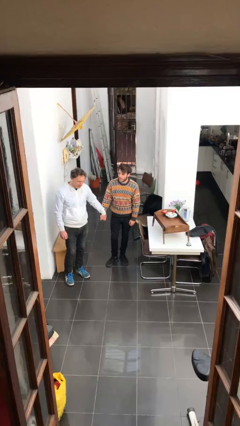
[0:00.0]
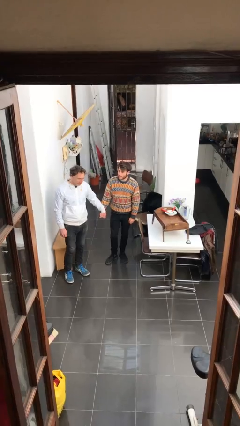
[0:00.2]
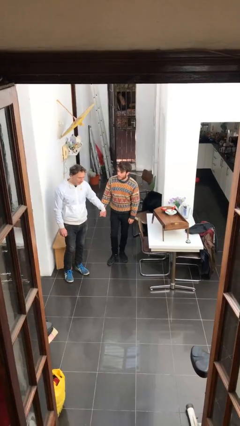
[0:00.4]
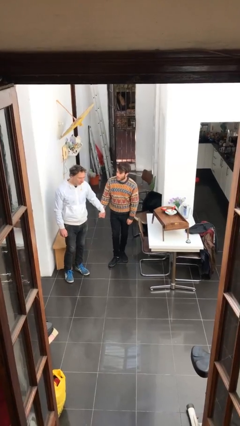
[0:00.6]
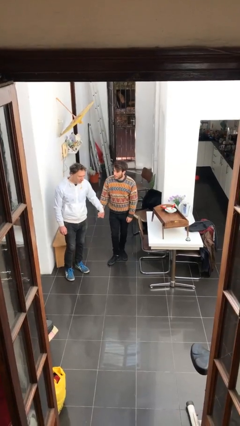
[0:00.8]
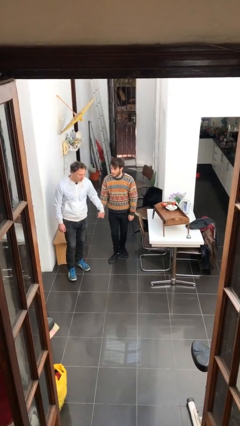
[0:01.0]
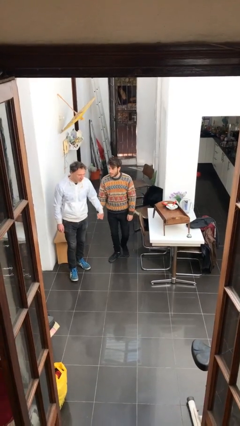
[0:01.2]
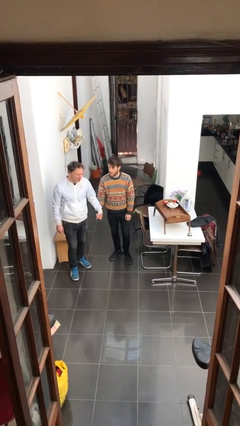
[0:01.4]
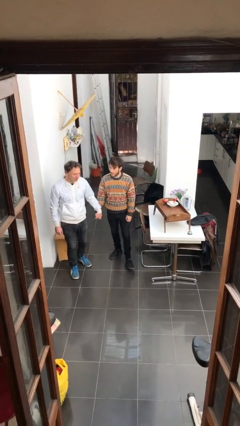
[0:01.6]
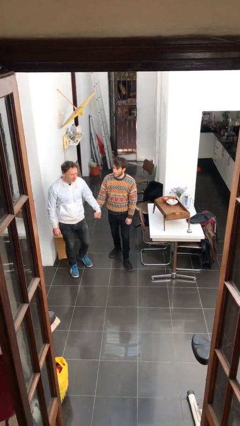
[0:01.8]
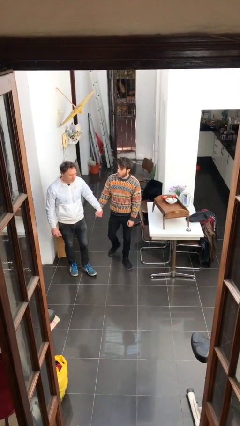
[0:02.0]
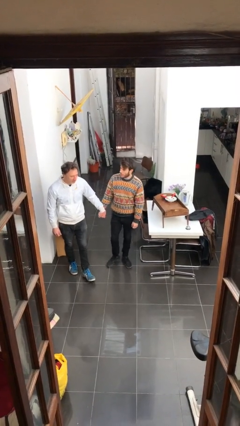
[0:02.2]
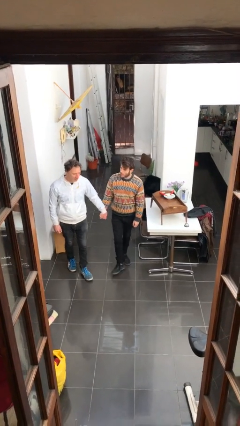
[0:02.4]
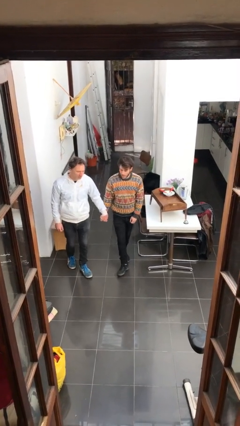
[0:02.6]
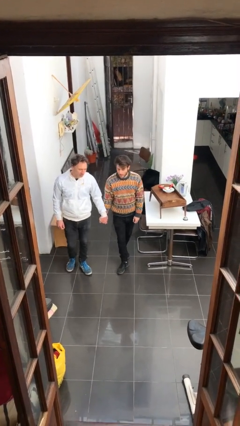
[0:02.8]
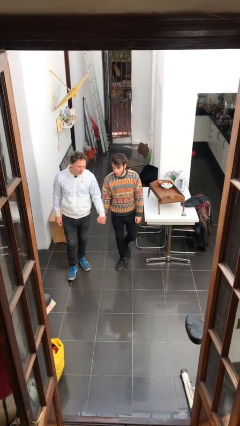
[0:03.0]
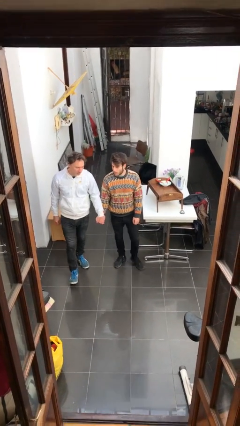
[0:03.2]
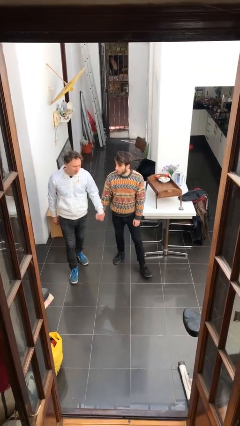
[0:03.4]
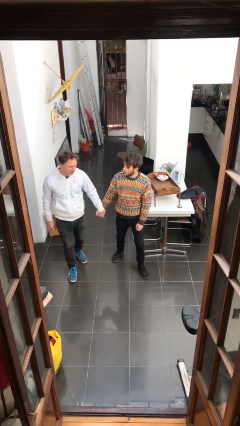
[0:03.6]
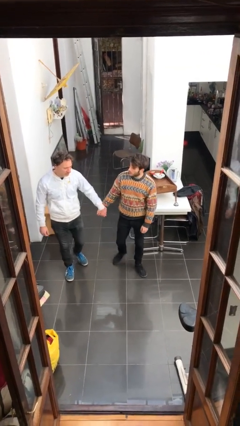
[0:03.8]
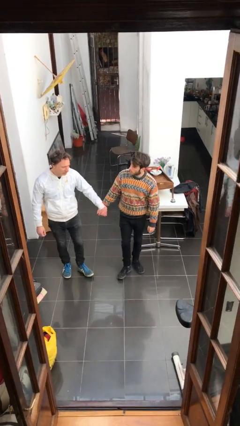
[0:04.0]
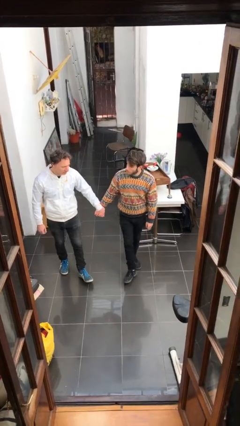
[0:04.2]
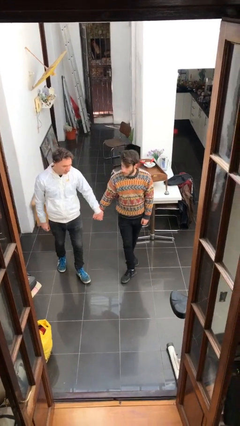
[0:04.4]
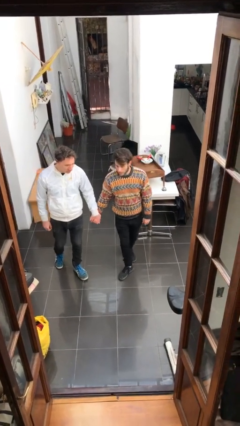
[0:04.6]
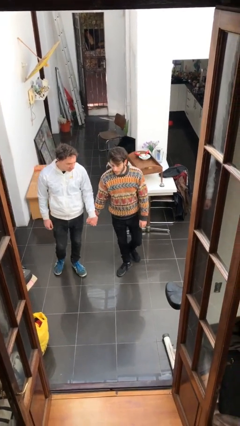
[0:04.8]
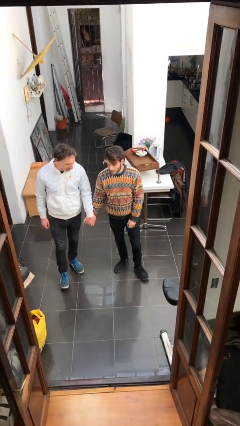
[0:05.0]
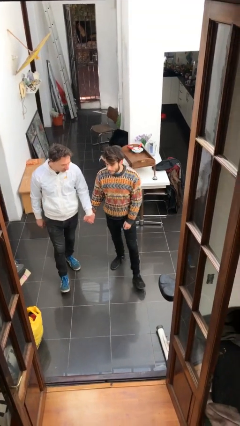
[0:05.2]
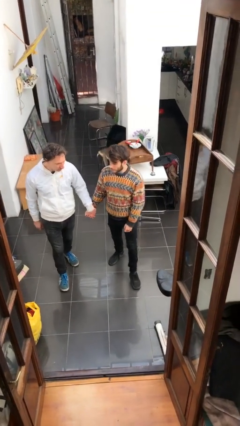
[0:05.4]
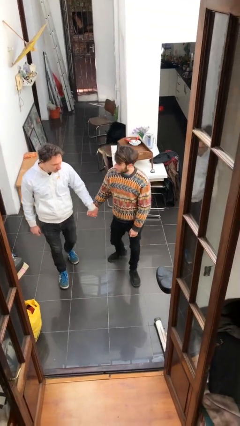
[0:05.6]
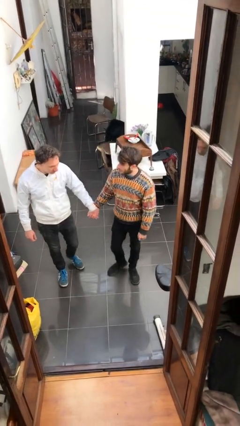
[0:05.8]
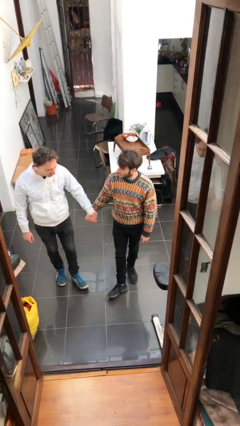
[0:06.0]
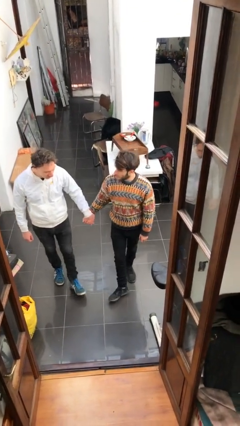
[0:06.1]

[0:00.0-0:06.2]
person holds hand

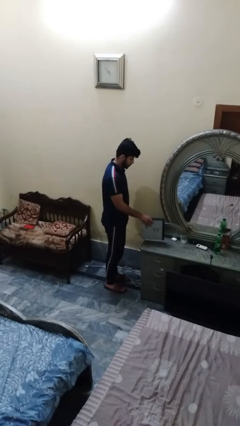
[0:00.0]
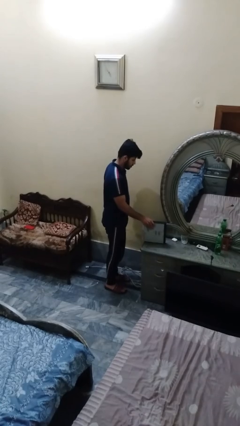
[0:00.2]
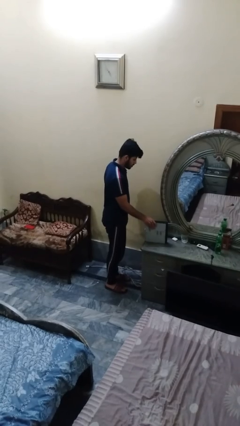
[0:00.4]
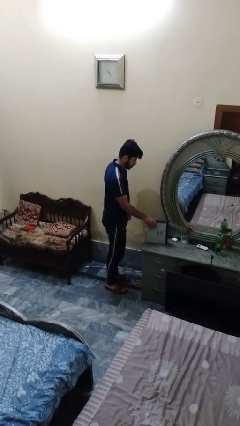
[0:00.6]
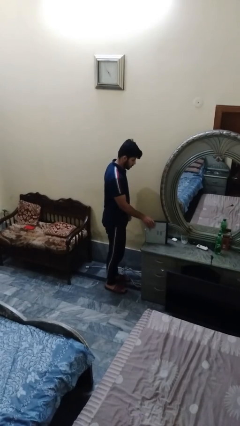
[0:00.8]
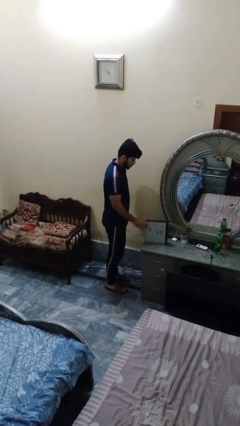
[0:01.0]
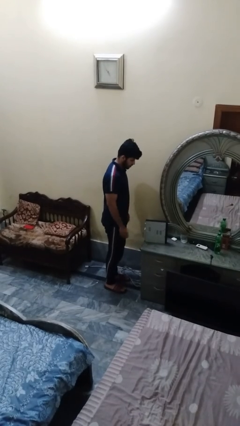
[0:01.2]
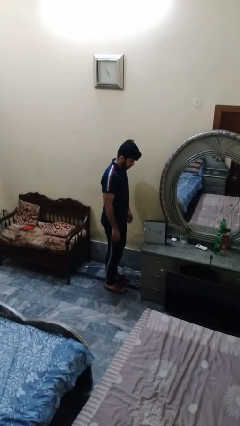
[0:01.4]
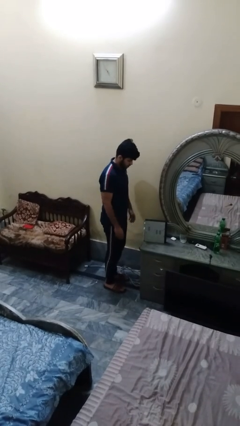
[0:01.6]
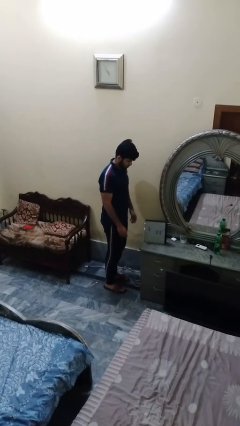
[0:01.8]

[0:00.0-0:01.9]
person puts down object on countertop

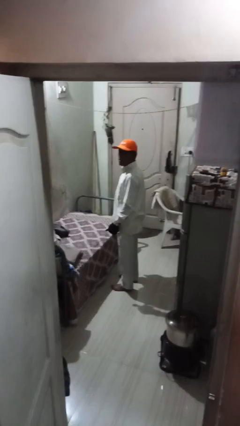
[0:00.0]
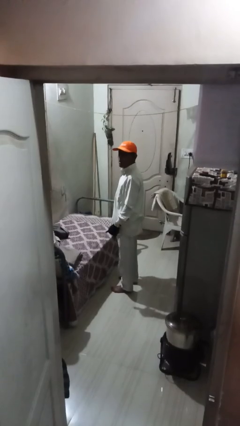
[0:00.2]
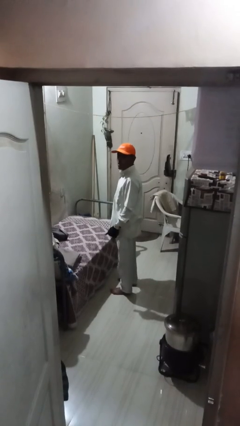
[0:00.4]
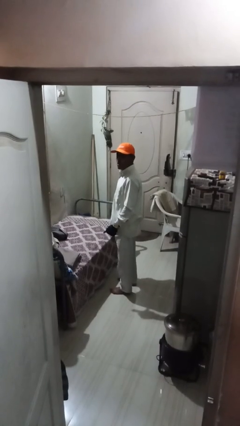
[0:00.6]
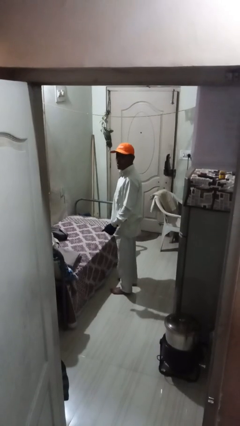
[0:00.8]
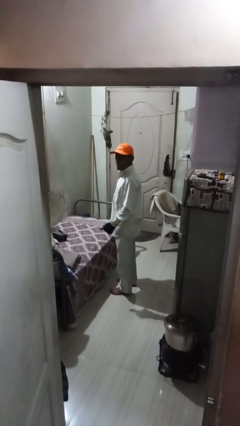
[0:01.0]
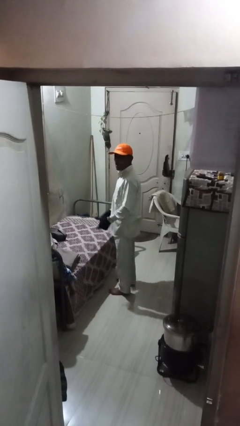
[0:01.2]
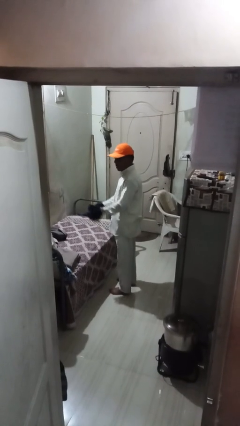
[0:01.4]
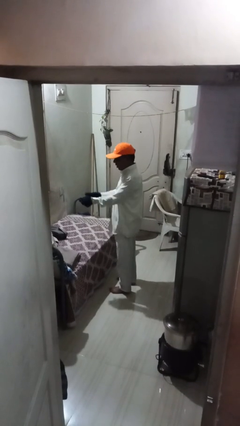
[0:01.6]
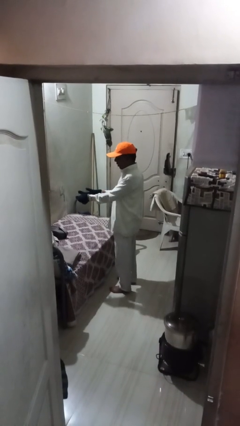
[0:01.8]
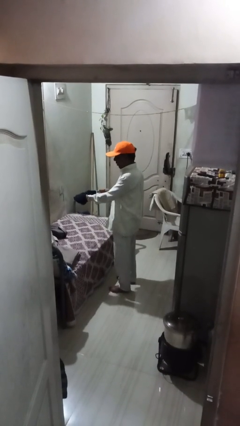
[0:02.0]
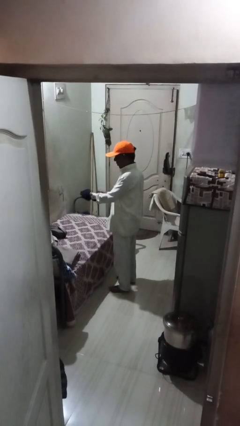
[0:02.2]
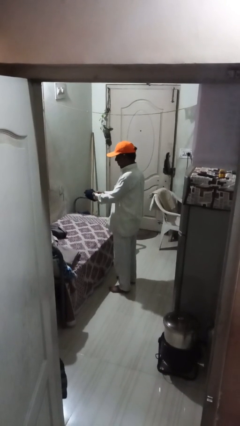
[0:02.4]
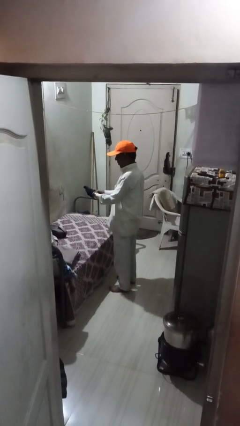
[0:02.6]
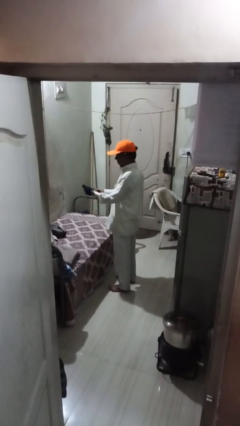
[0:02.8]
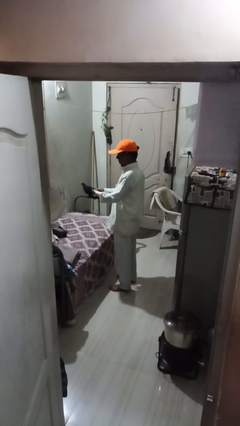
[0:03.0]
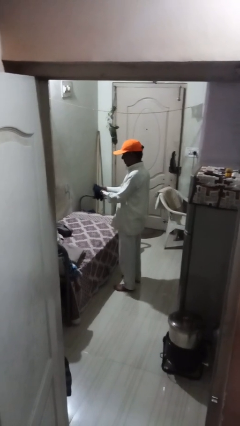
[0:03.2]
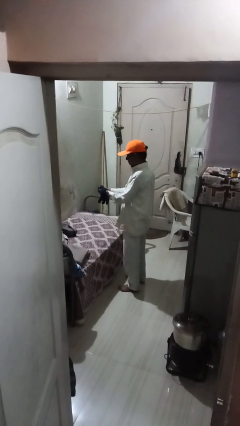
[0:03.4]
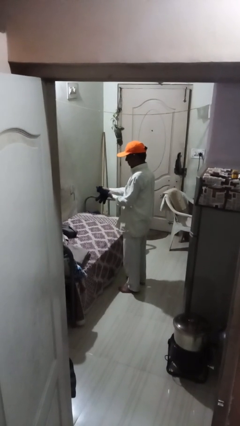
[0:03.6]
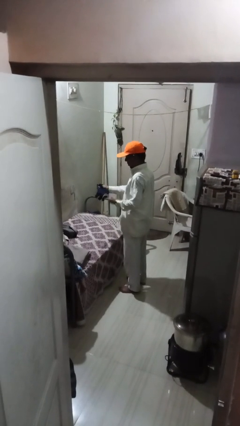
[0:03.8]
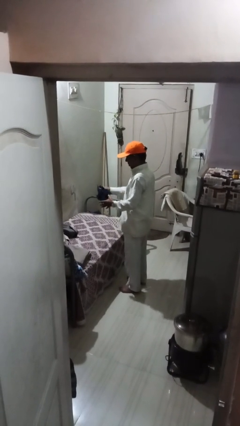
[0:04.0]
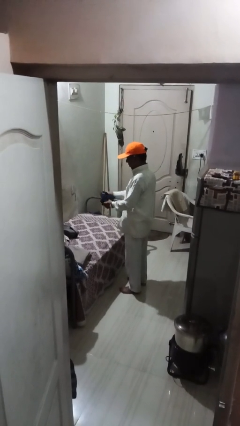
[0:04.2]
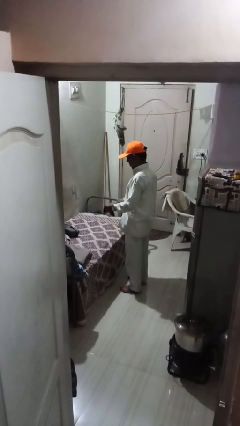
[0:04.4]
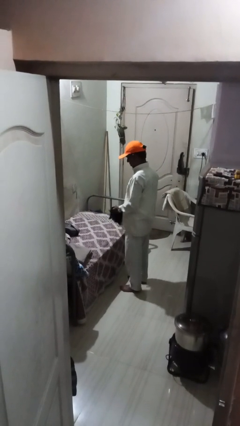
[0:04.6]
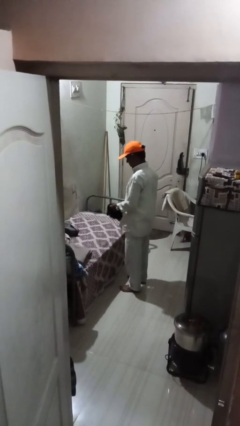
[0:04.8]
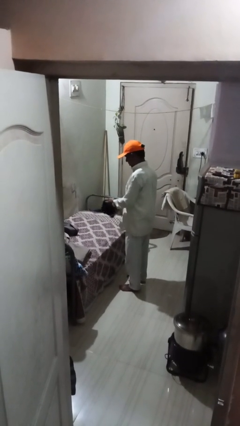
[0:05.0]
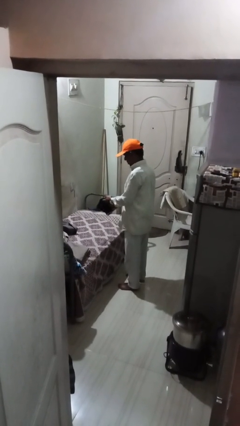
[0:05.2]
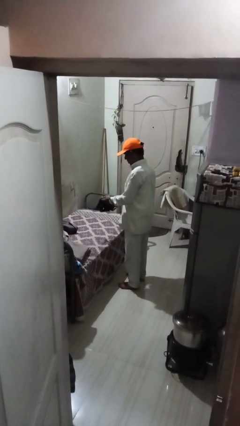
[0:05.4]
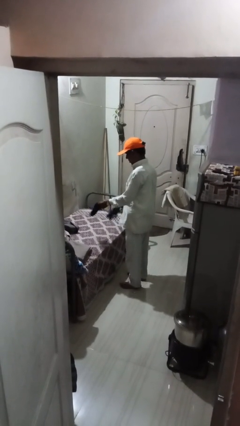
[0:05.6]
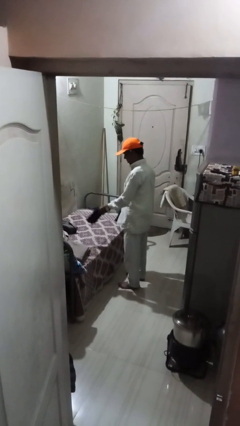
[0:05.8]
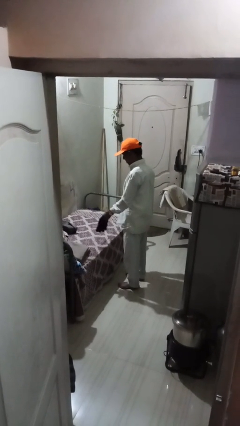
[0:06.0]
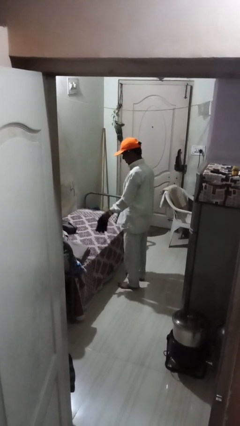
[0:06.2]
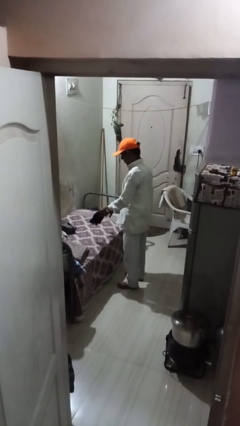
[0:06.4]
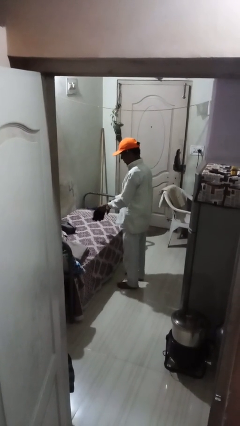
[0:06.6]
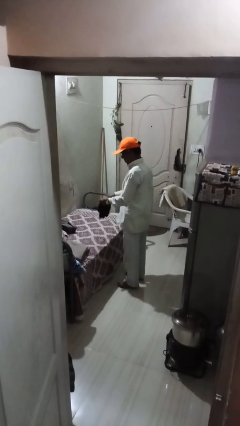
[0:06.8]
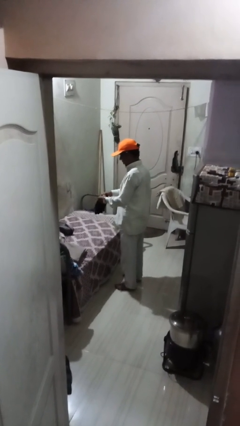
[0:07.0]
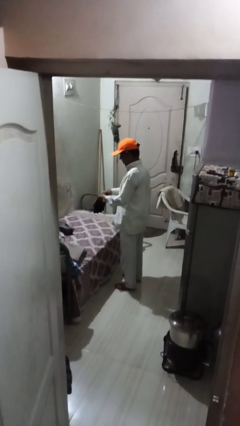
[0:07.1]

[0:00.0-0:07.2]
person takes off gloves

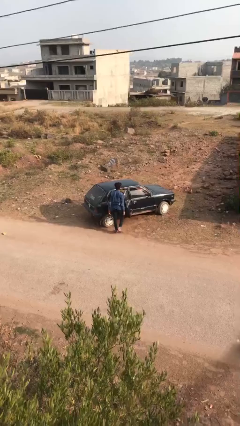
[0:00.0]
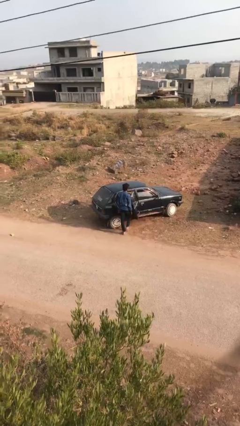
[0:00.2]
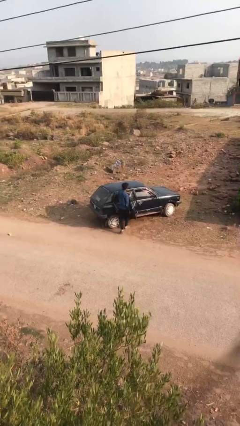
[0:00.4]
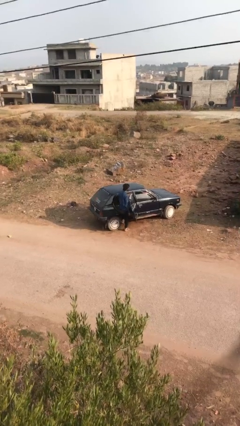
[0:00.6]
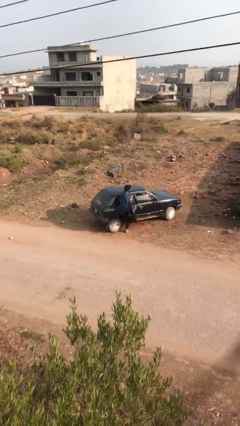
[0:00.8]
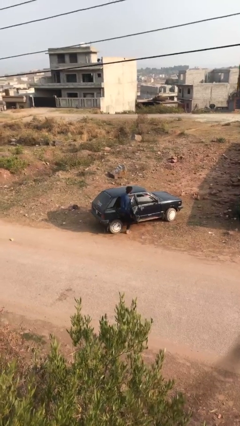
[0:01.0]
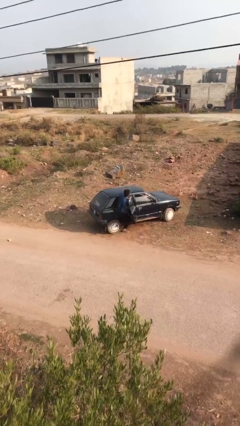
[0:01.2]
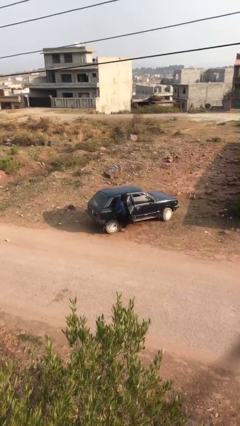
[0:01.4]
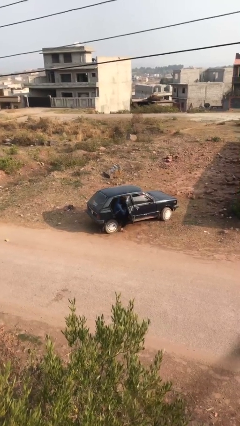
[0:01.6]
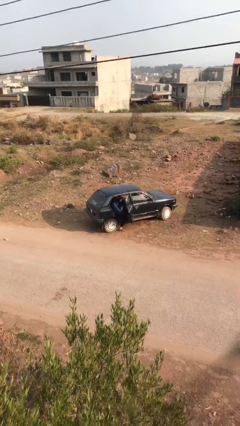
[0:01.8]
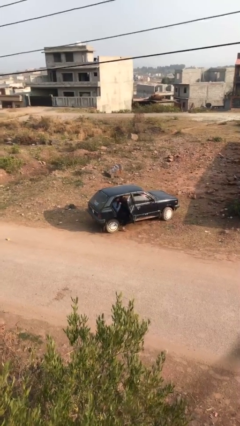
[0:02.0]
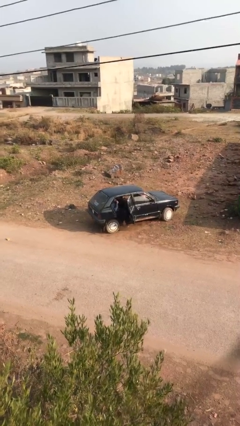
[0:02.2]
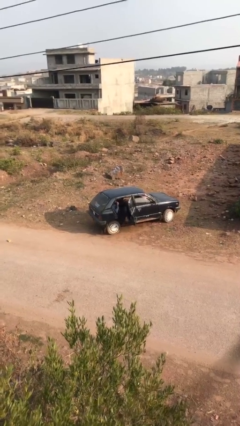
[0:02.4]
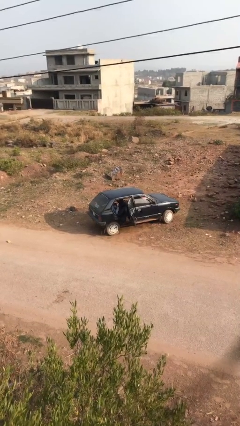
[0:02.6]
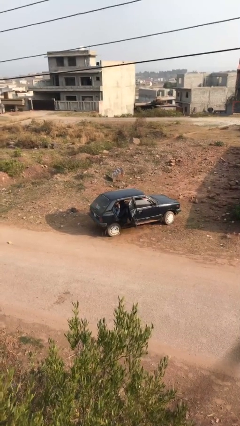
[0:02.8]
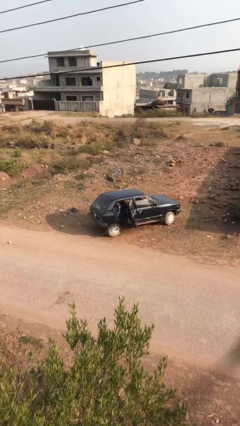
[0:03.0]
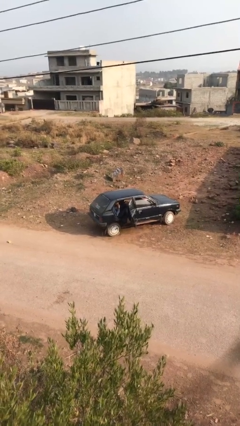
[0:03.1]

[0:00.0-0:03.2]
person enters car
